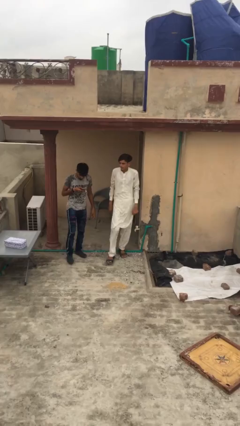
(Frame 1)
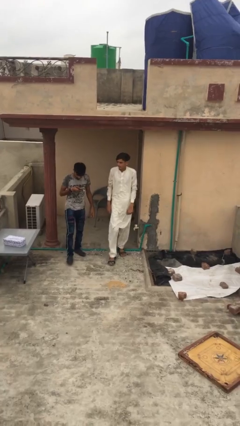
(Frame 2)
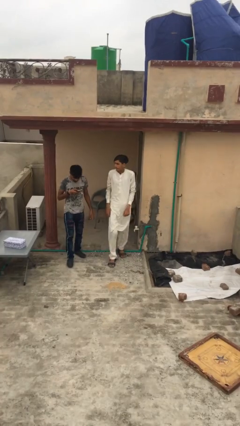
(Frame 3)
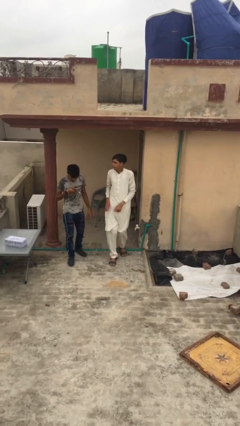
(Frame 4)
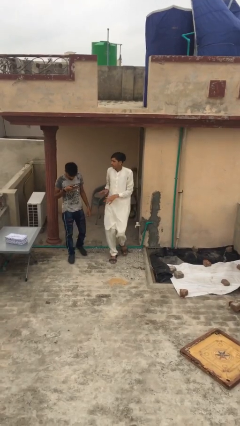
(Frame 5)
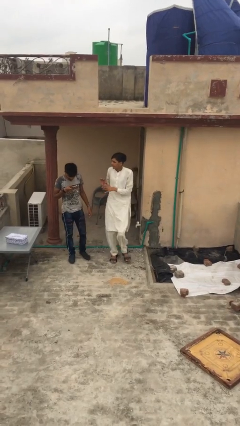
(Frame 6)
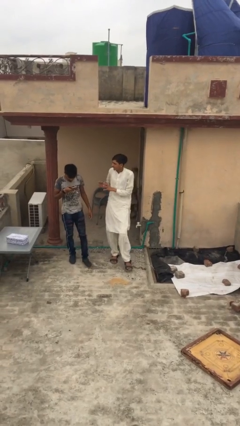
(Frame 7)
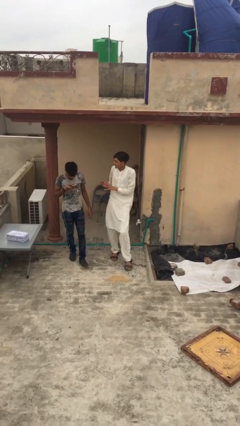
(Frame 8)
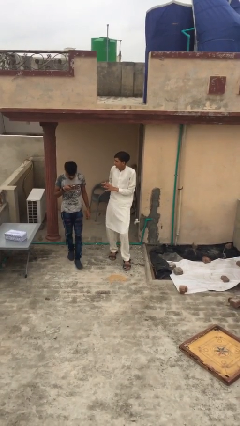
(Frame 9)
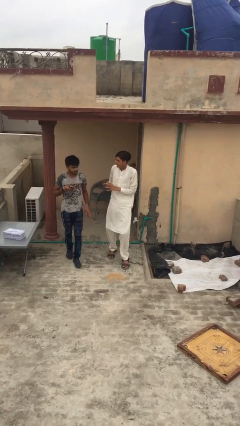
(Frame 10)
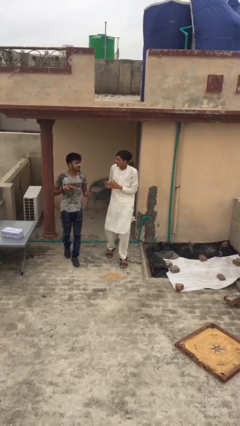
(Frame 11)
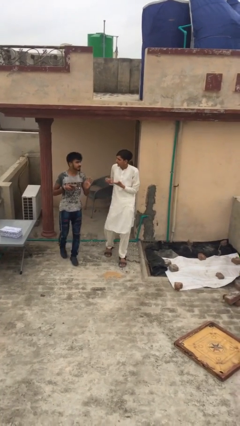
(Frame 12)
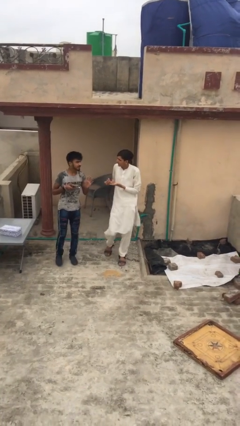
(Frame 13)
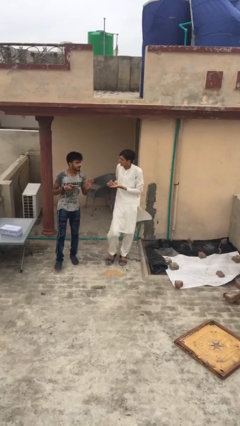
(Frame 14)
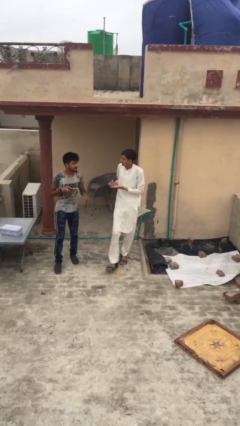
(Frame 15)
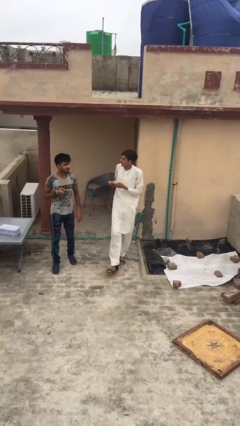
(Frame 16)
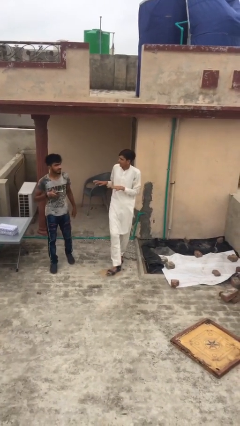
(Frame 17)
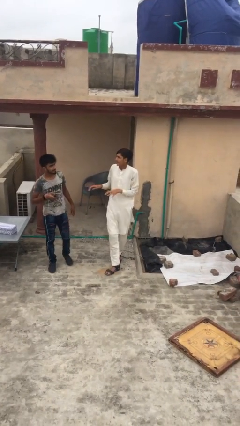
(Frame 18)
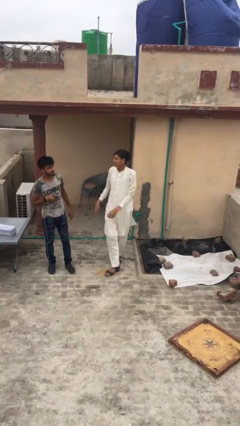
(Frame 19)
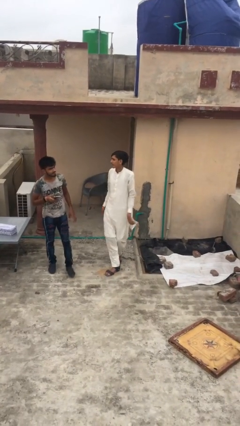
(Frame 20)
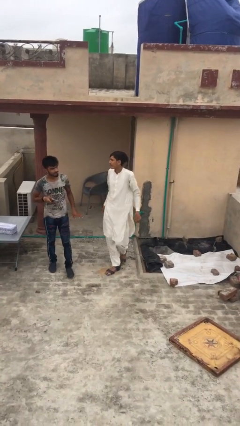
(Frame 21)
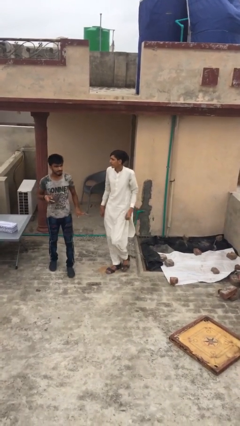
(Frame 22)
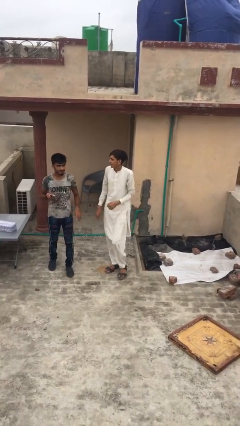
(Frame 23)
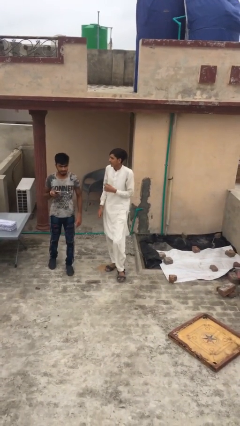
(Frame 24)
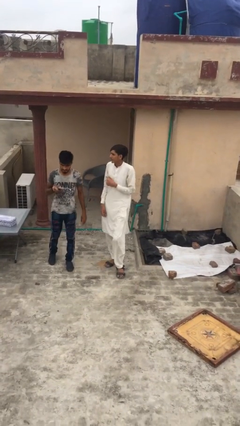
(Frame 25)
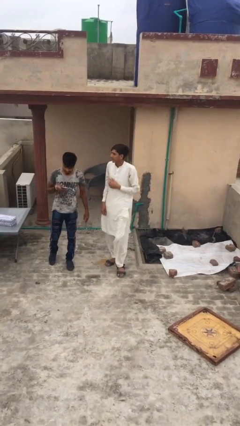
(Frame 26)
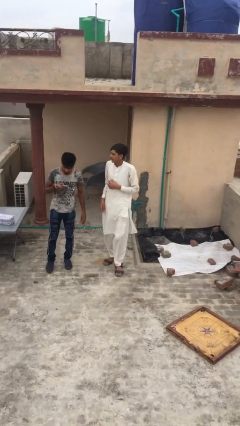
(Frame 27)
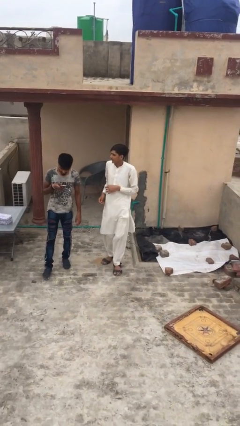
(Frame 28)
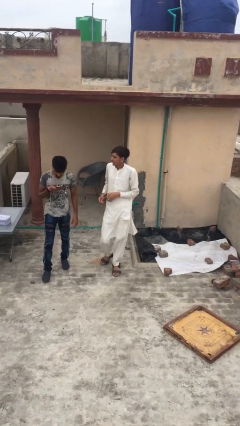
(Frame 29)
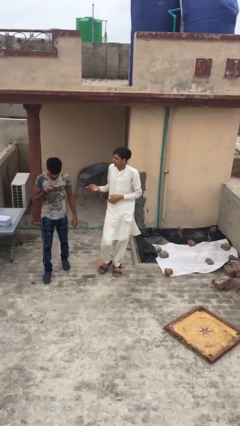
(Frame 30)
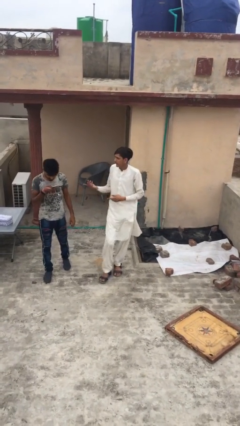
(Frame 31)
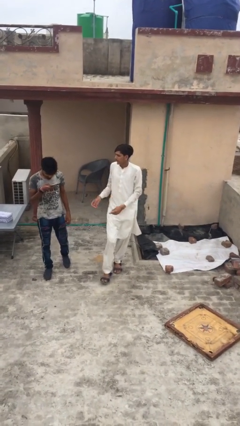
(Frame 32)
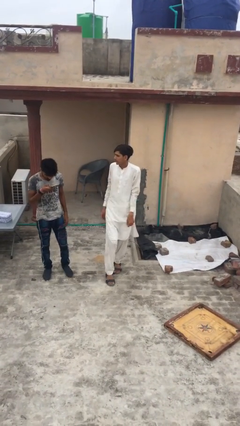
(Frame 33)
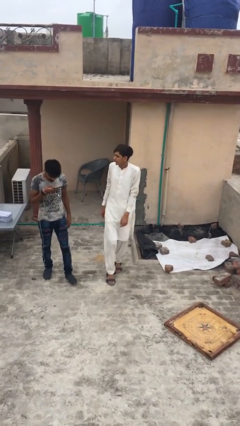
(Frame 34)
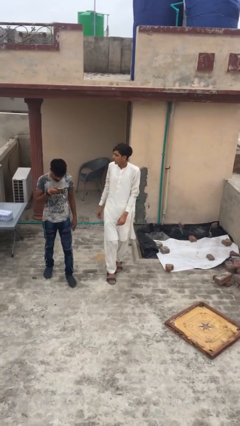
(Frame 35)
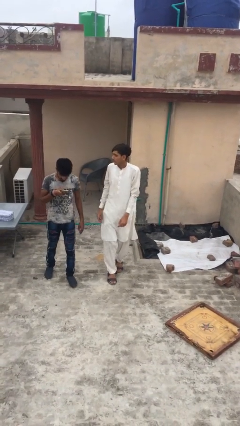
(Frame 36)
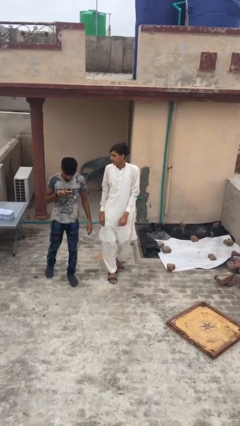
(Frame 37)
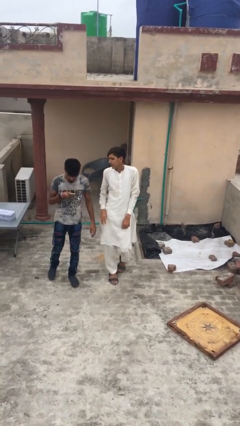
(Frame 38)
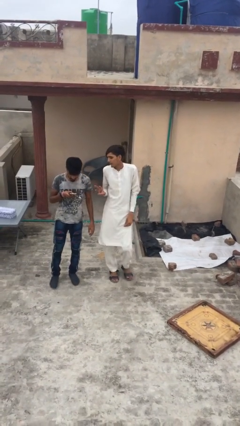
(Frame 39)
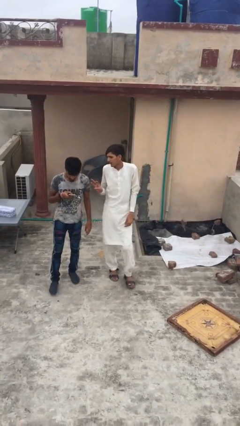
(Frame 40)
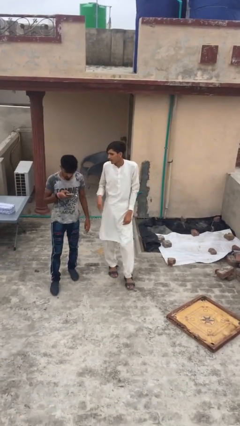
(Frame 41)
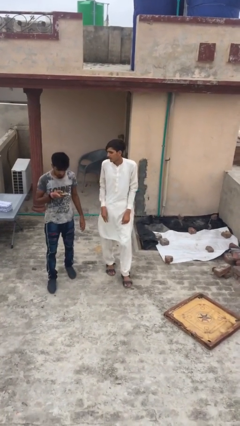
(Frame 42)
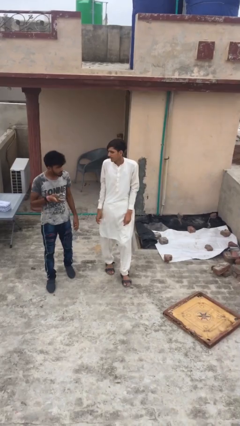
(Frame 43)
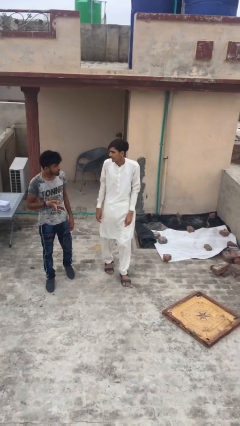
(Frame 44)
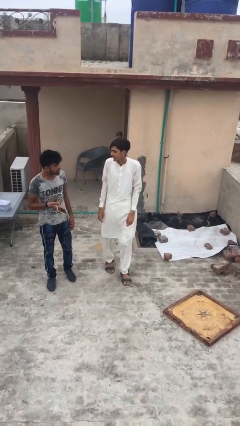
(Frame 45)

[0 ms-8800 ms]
person talks to person

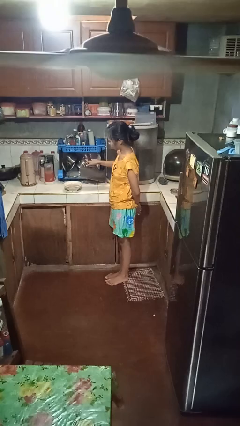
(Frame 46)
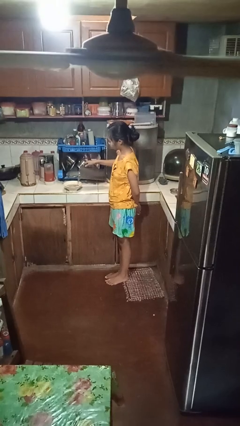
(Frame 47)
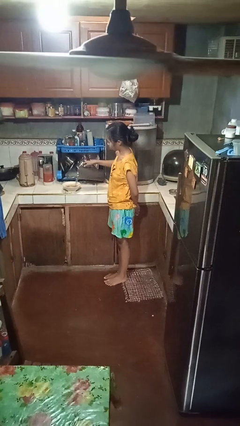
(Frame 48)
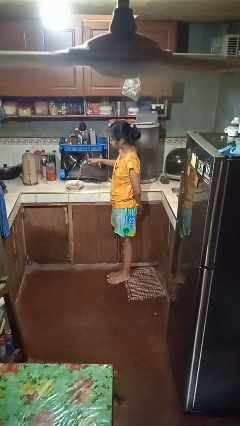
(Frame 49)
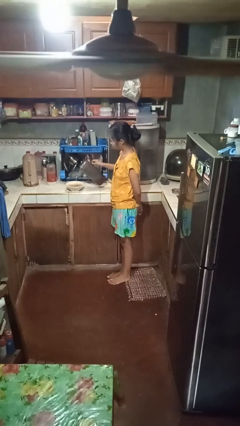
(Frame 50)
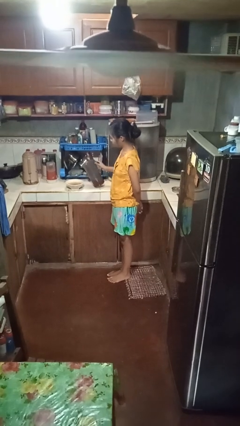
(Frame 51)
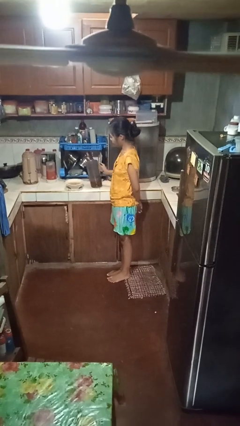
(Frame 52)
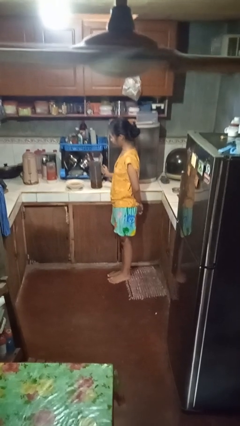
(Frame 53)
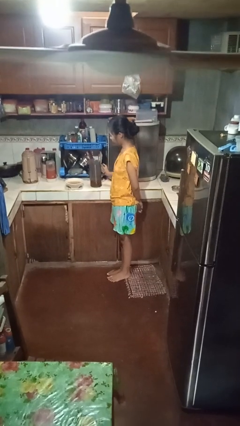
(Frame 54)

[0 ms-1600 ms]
person pours into bowl

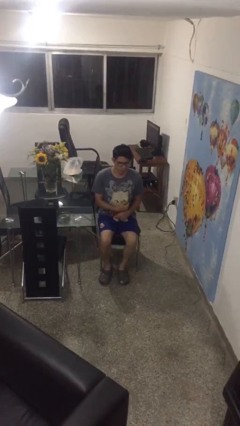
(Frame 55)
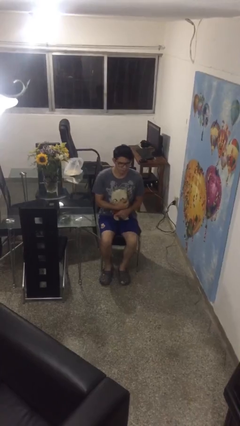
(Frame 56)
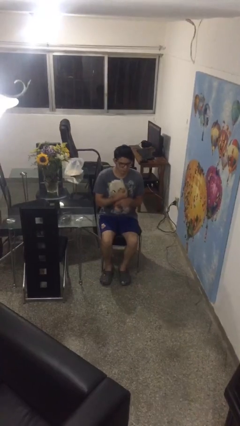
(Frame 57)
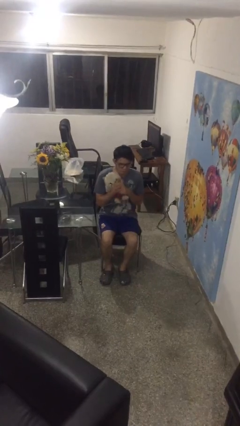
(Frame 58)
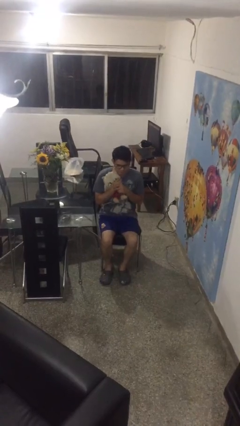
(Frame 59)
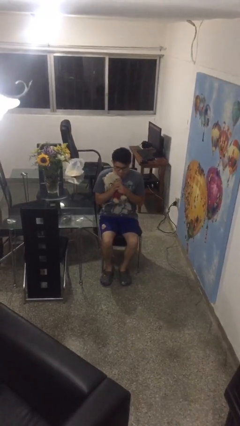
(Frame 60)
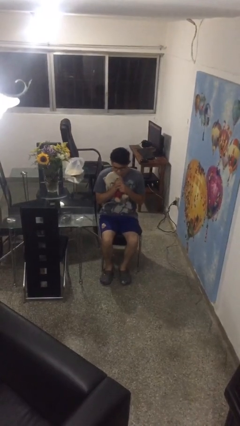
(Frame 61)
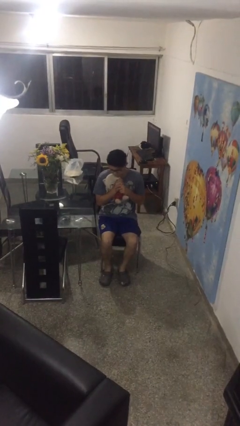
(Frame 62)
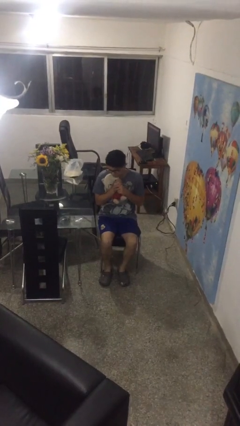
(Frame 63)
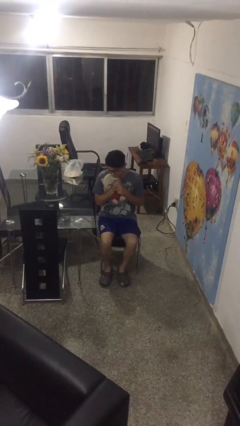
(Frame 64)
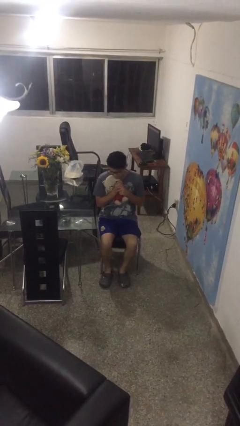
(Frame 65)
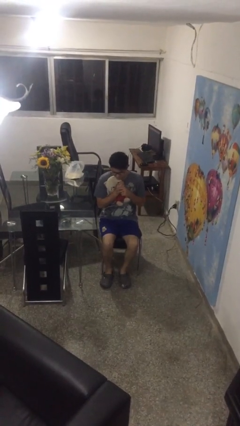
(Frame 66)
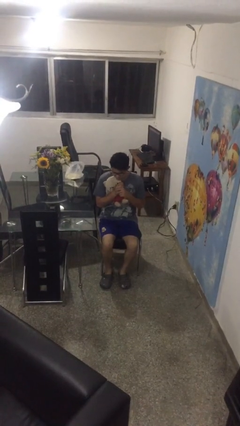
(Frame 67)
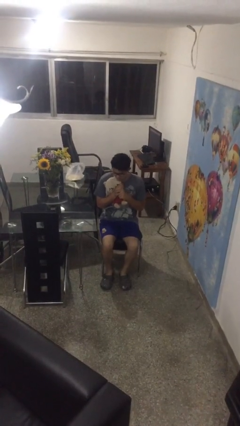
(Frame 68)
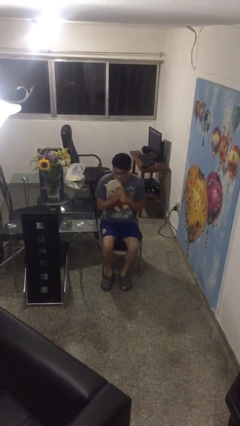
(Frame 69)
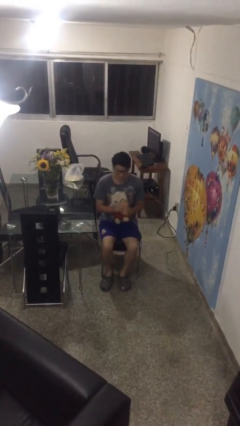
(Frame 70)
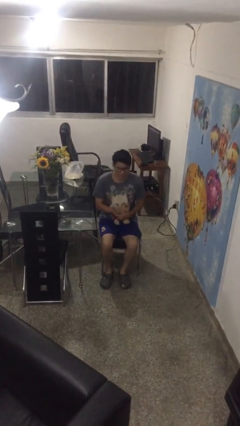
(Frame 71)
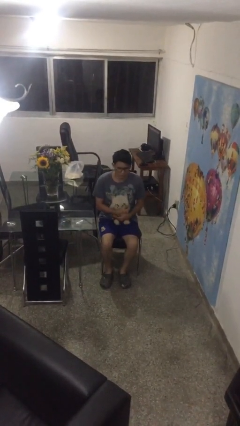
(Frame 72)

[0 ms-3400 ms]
person hugs stuffed animal

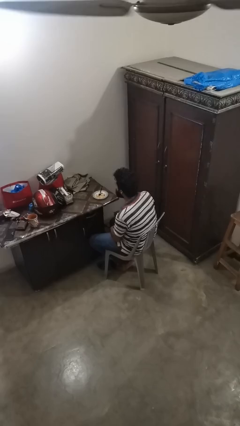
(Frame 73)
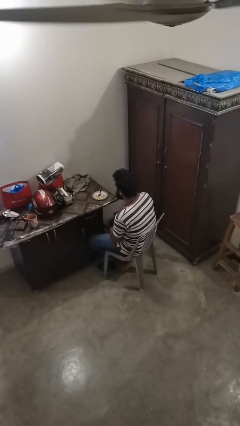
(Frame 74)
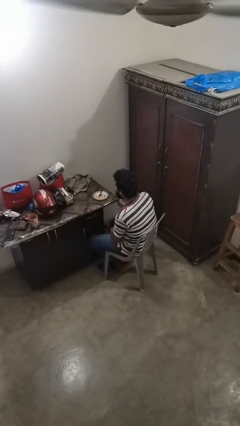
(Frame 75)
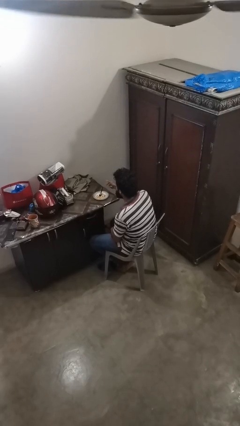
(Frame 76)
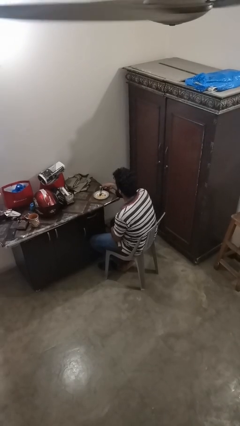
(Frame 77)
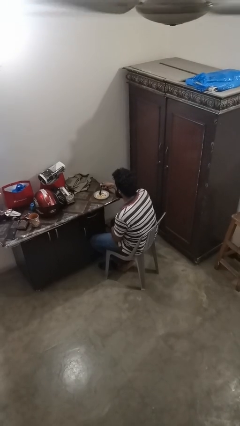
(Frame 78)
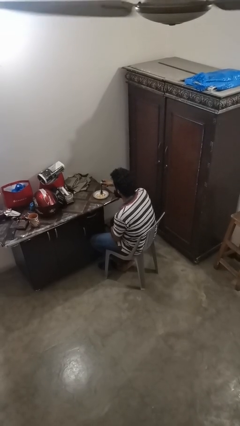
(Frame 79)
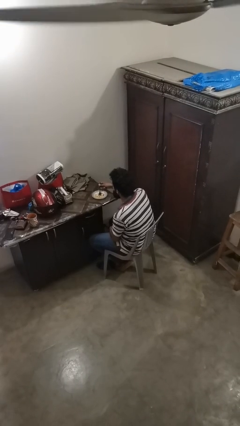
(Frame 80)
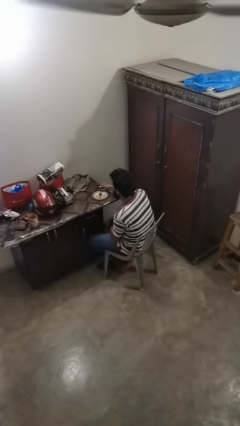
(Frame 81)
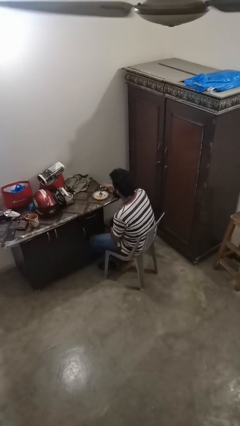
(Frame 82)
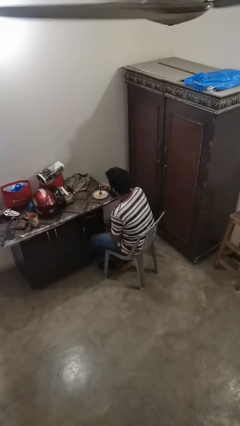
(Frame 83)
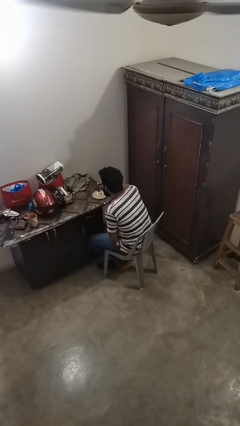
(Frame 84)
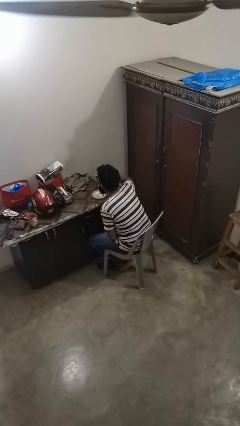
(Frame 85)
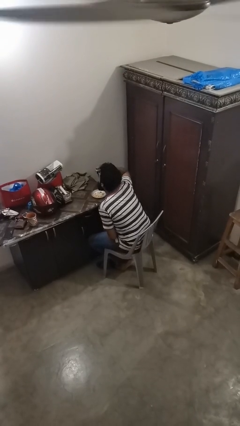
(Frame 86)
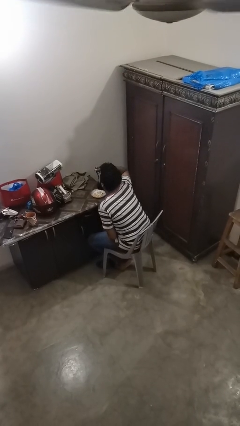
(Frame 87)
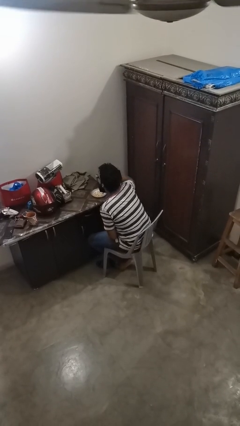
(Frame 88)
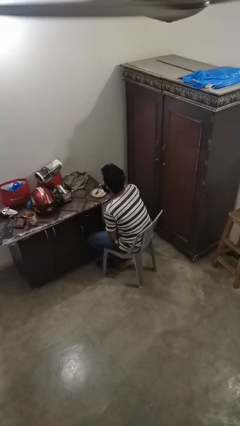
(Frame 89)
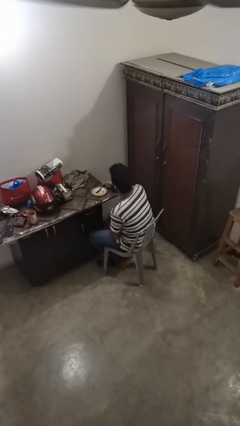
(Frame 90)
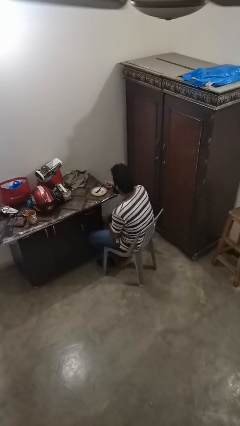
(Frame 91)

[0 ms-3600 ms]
person eats with utensil
